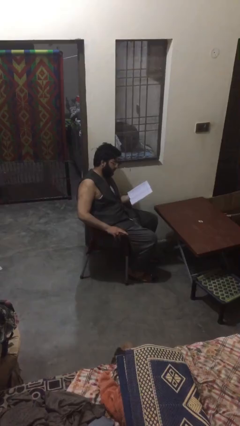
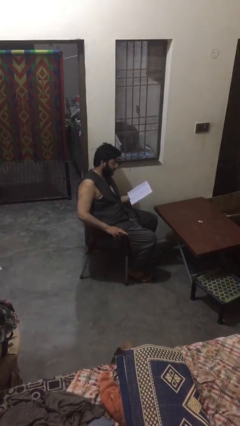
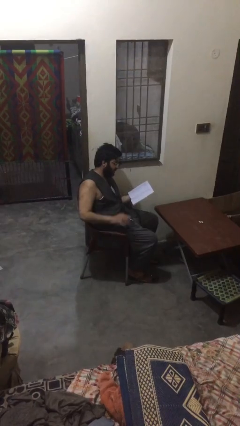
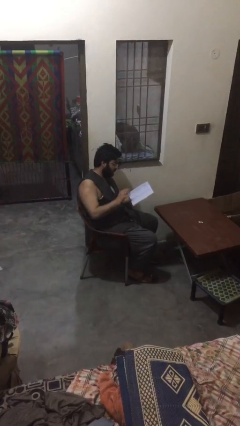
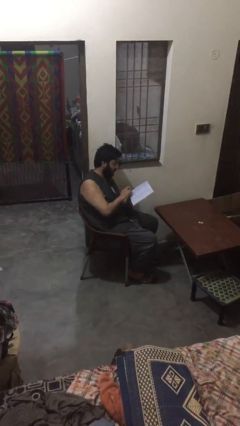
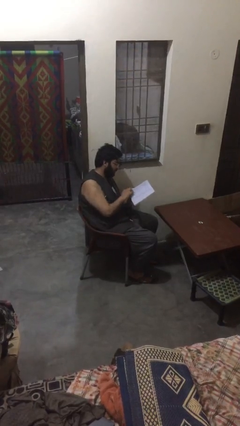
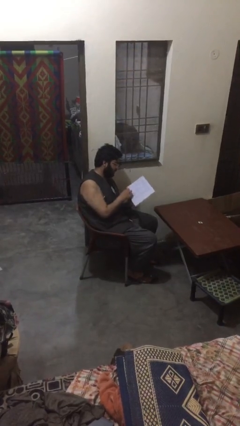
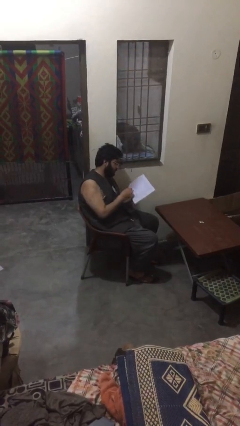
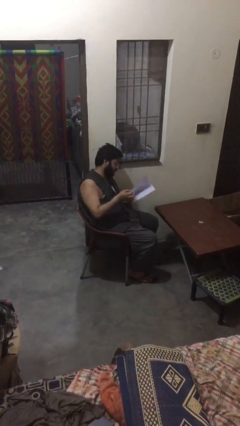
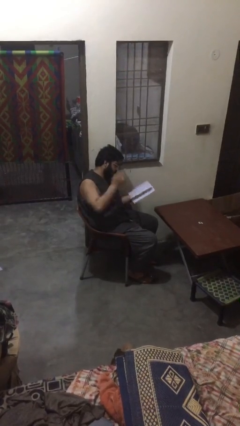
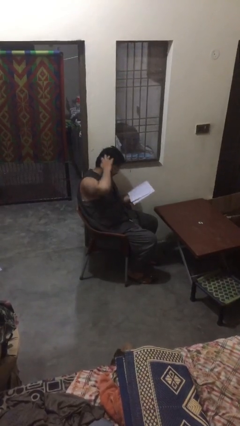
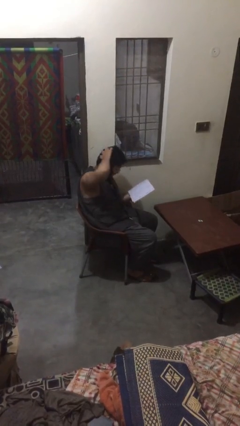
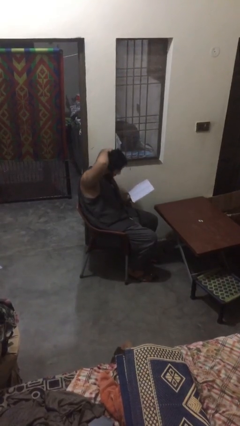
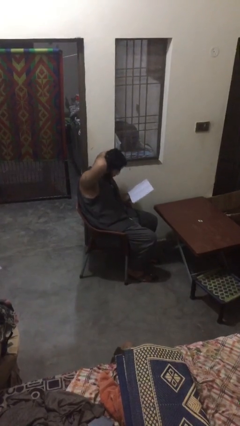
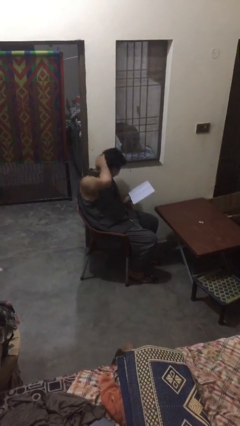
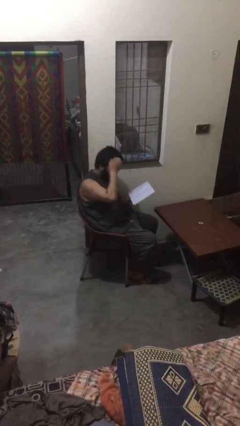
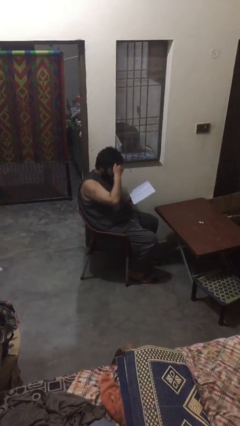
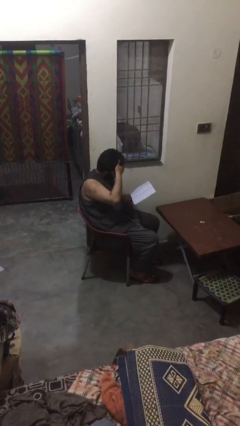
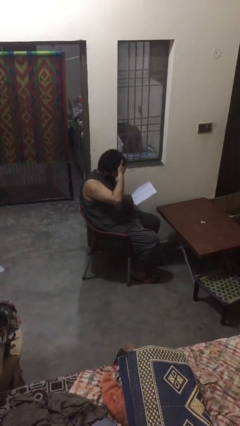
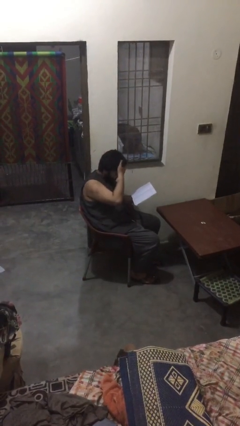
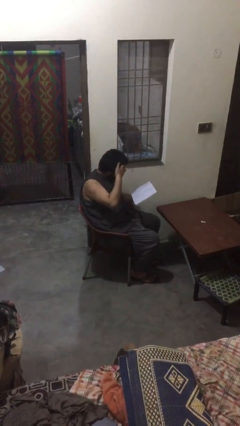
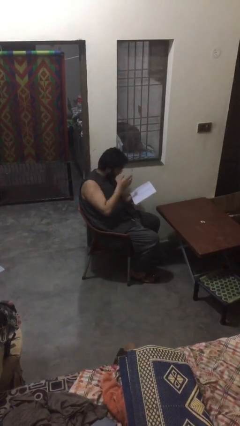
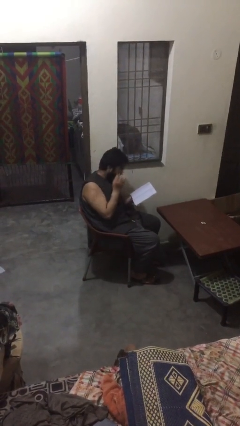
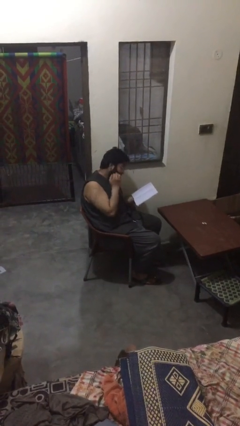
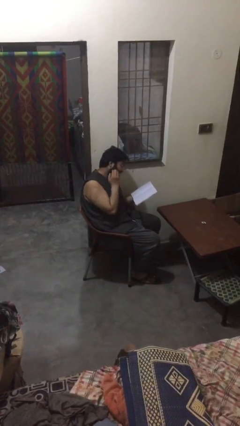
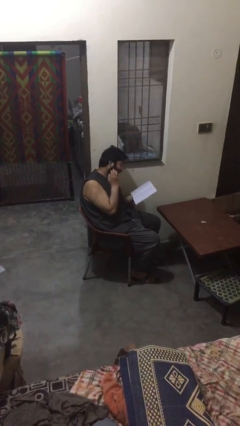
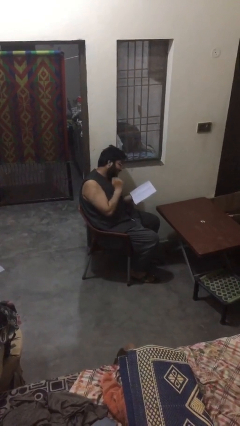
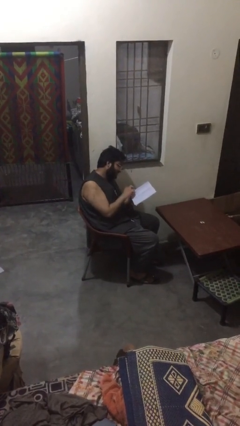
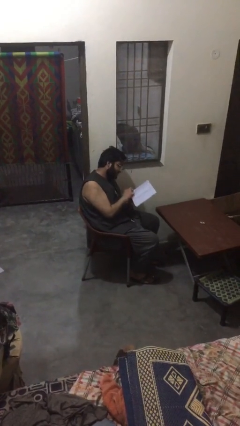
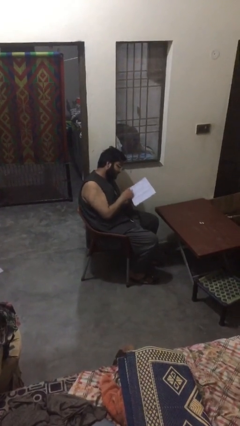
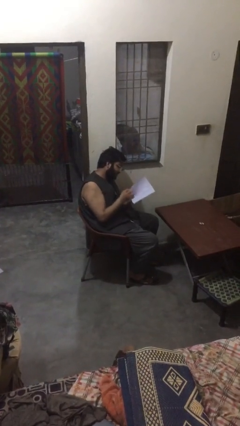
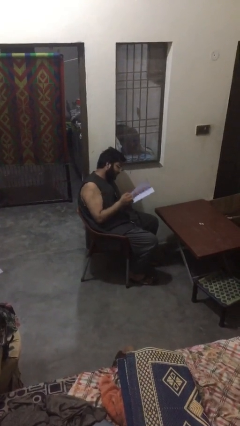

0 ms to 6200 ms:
person reads document

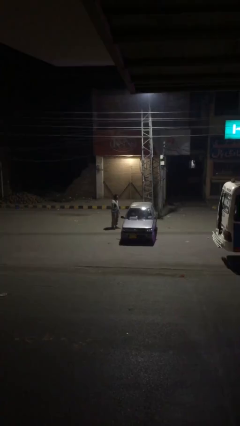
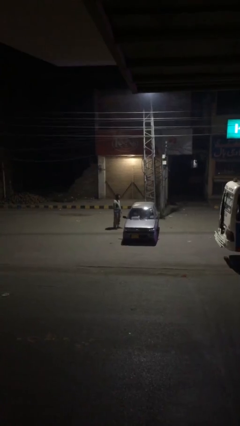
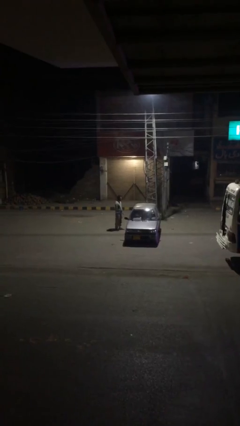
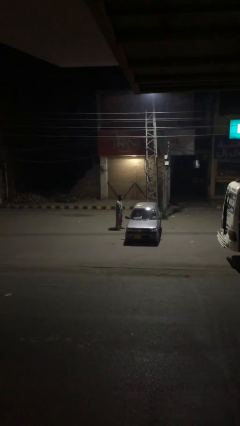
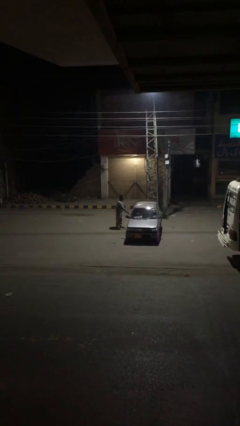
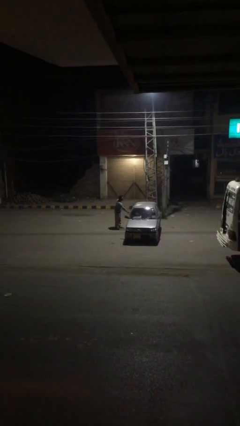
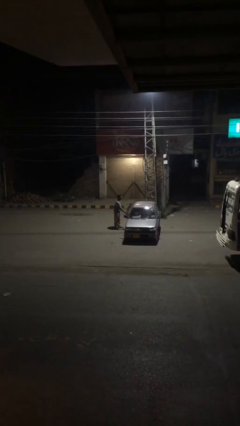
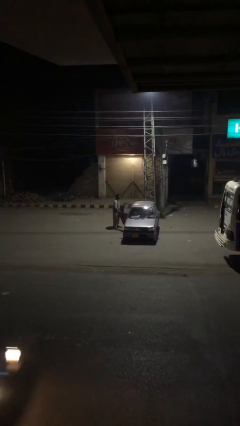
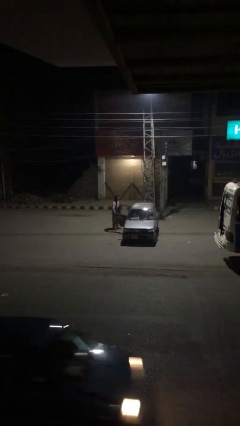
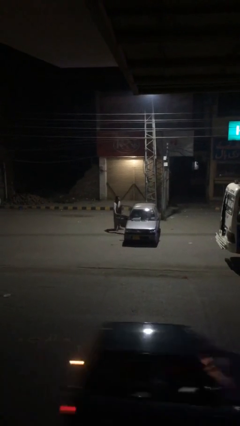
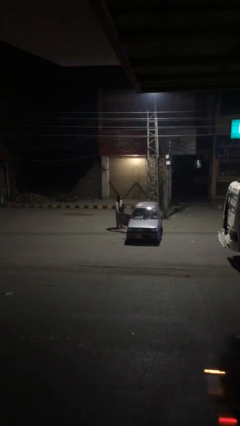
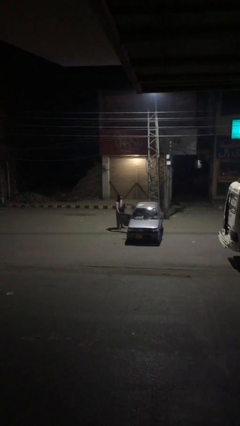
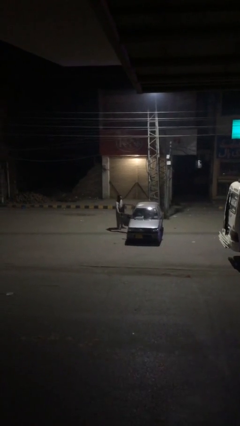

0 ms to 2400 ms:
person opens car door

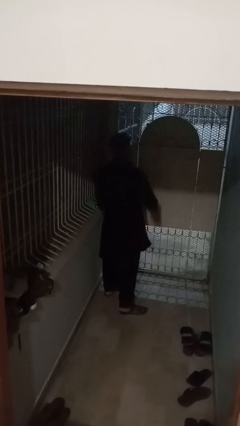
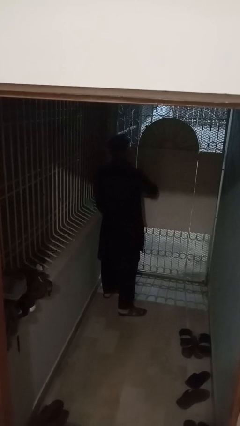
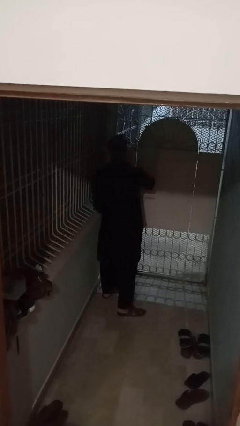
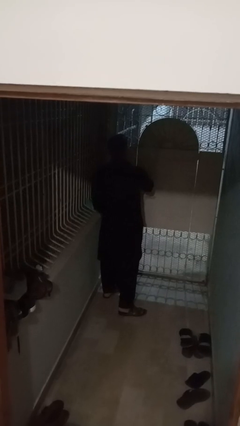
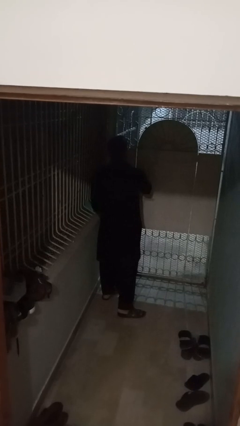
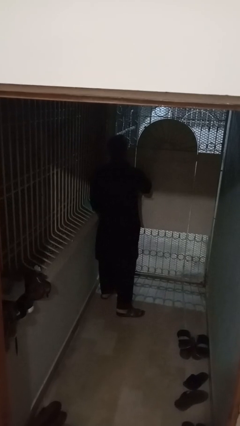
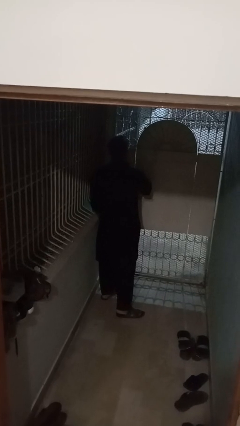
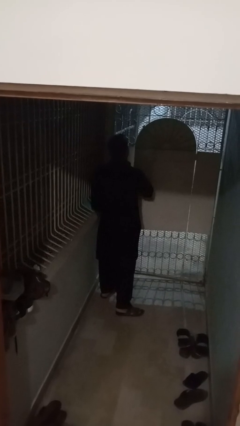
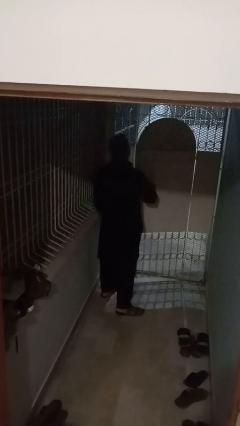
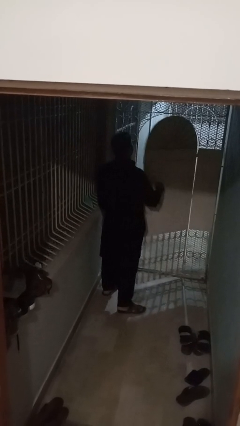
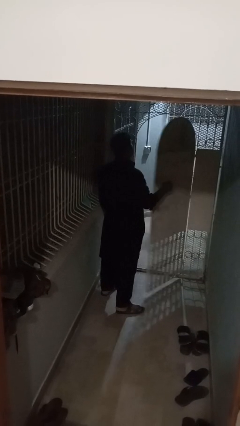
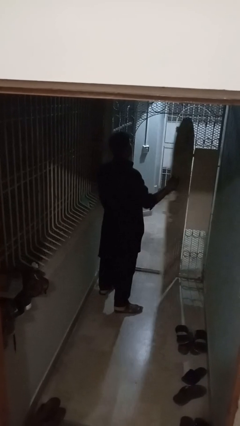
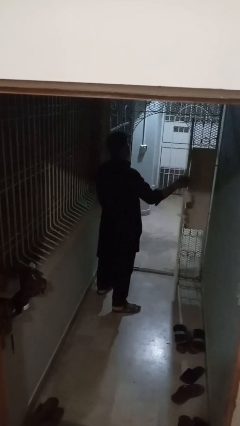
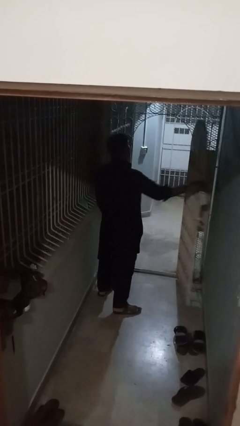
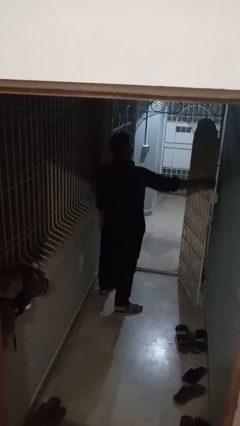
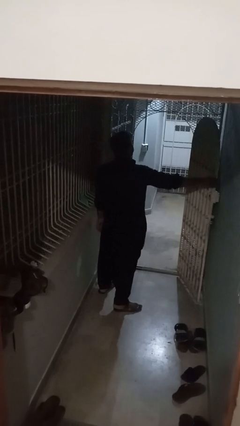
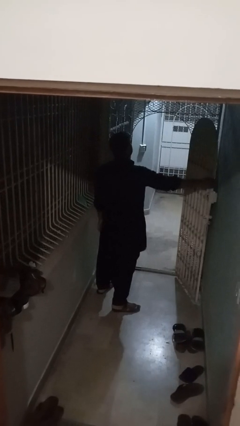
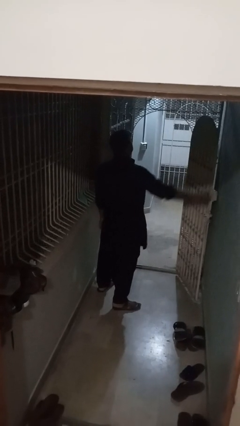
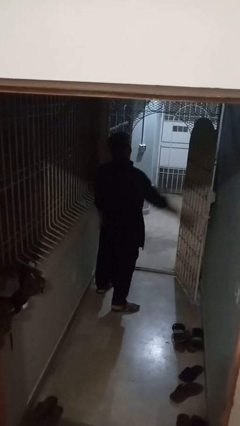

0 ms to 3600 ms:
person opens gate

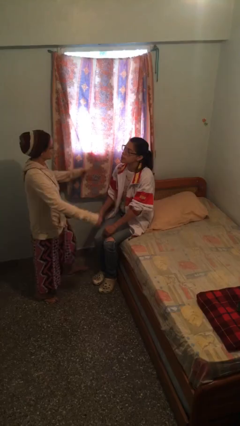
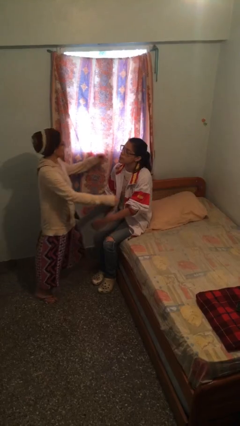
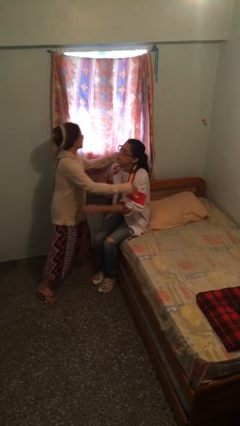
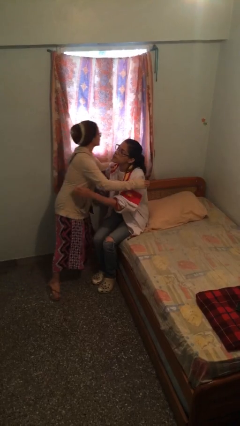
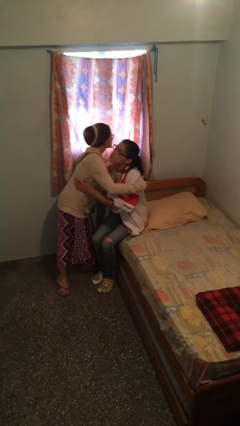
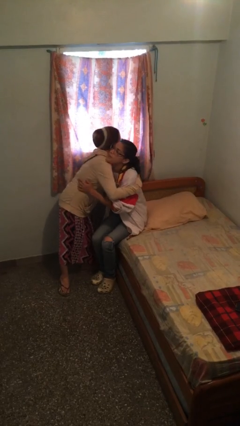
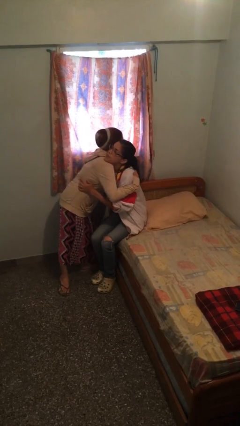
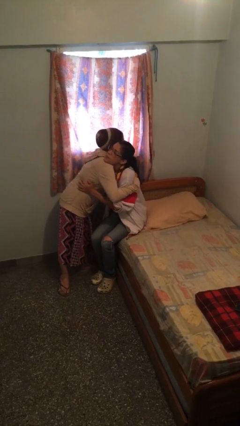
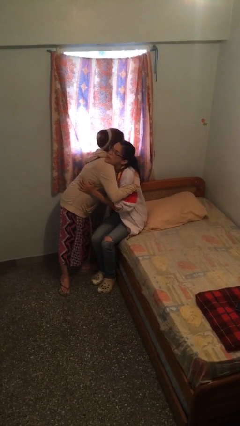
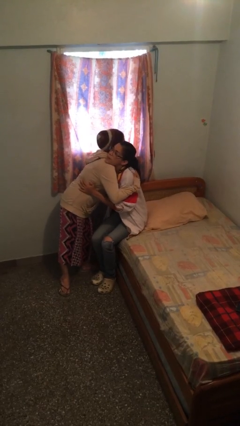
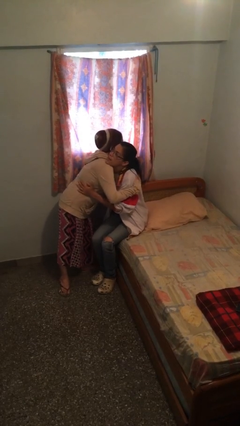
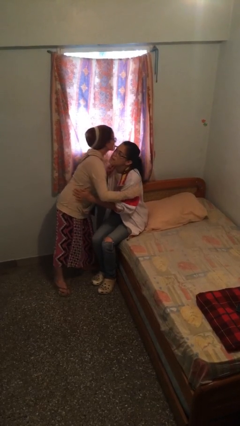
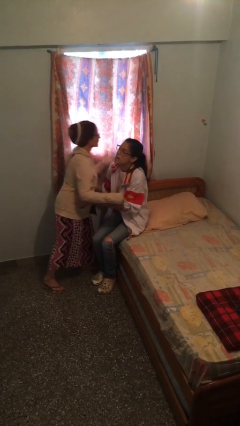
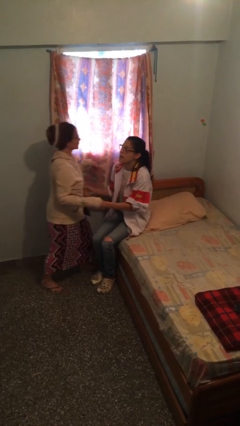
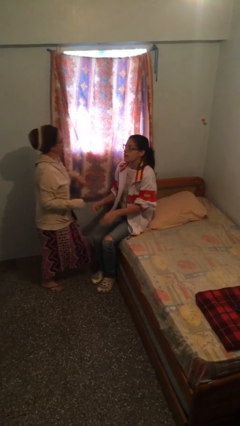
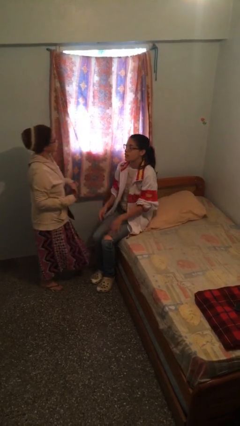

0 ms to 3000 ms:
person embraces person

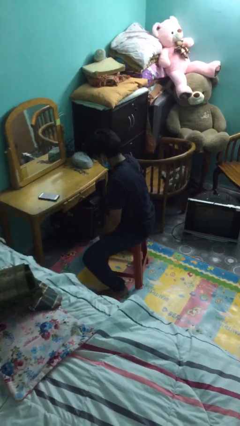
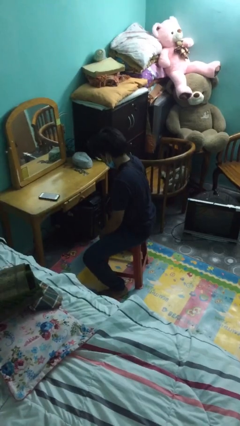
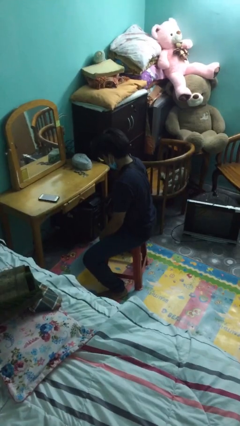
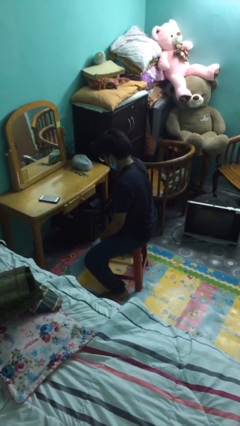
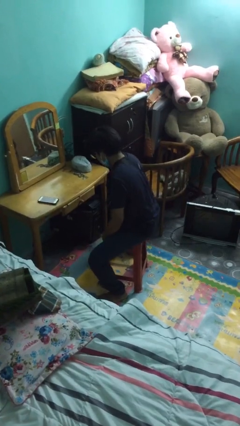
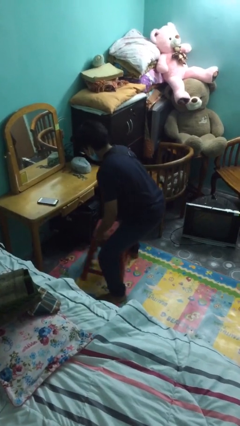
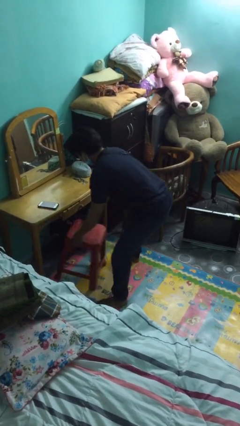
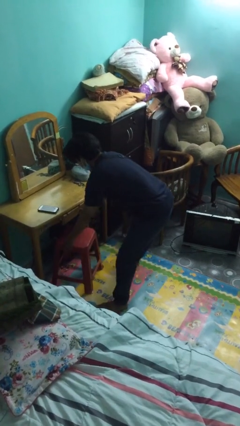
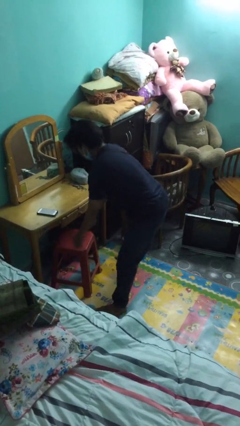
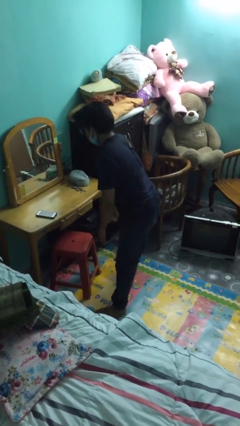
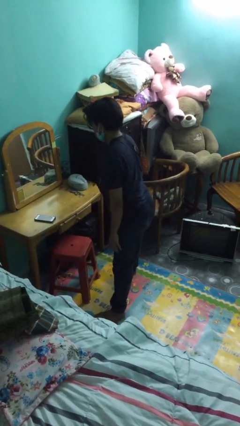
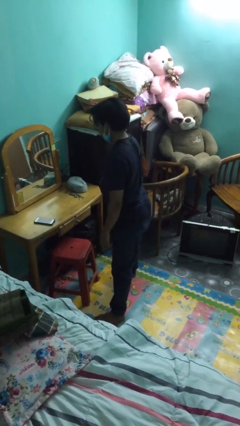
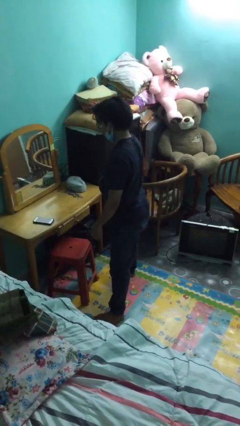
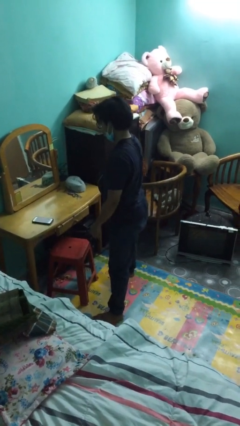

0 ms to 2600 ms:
person stands up
